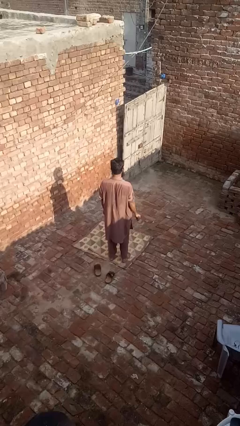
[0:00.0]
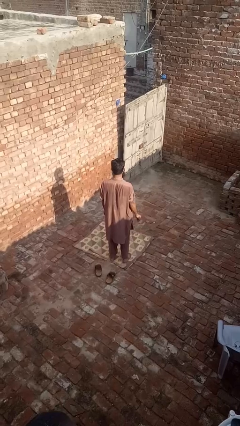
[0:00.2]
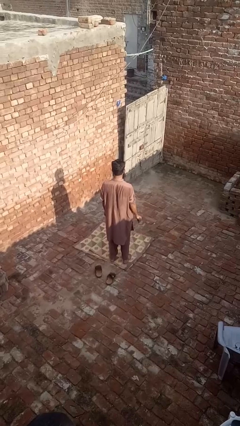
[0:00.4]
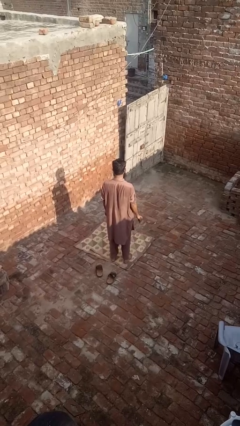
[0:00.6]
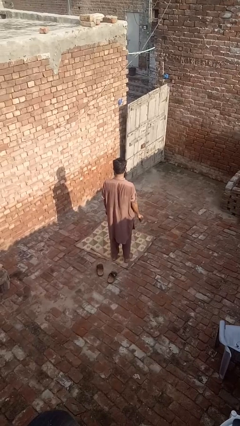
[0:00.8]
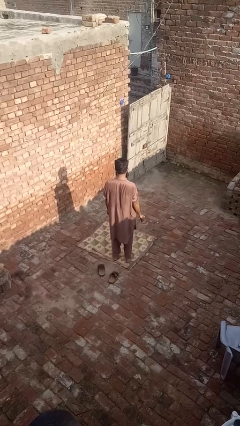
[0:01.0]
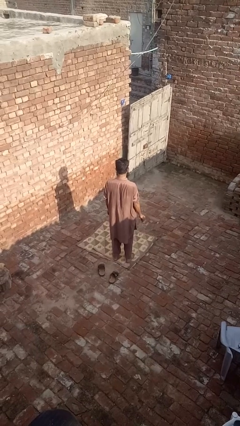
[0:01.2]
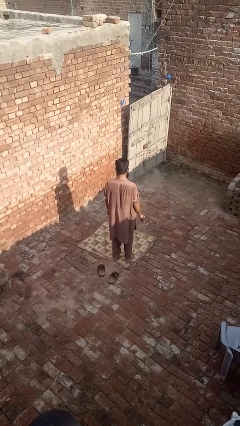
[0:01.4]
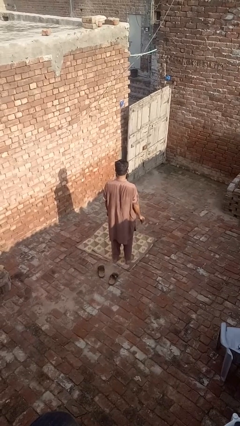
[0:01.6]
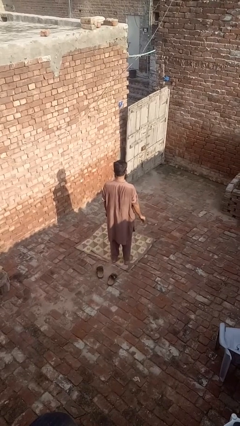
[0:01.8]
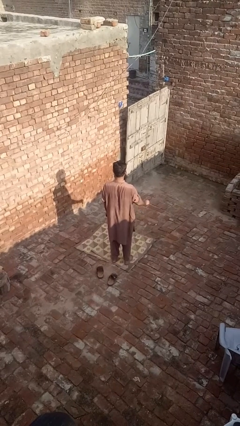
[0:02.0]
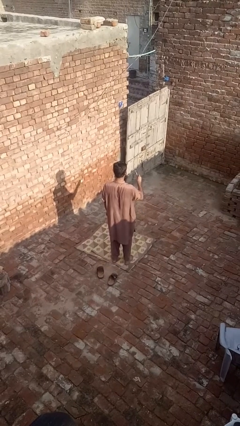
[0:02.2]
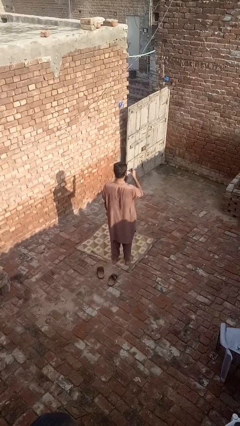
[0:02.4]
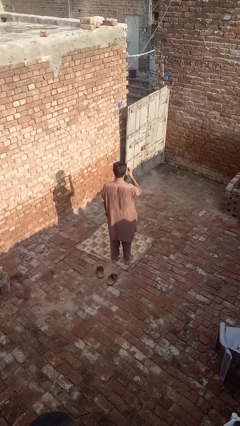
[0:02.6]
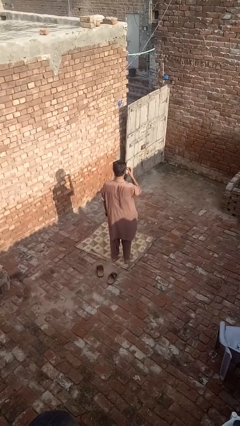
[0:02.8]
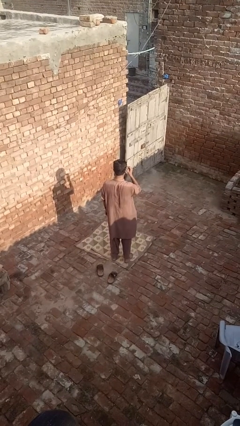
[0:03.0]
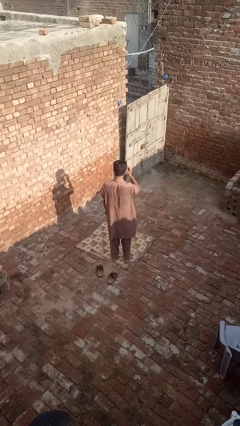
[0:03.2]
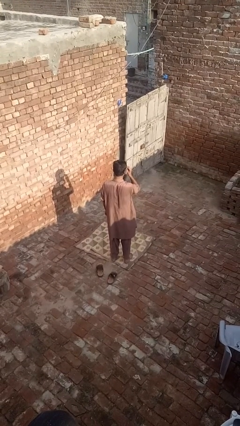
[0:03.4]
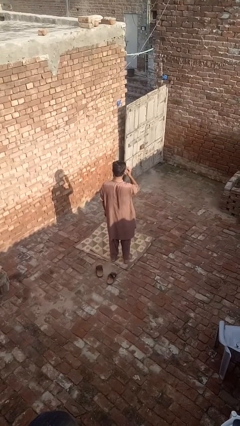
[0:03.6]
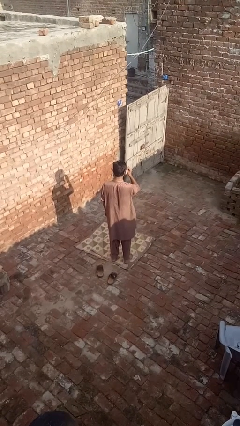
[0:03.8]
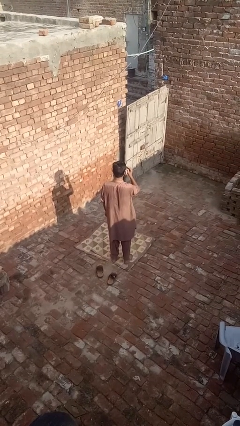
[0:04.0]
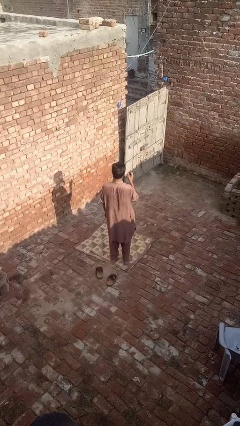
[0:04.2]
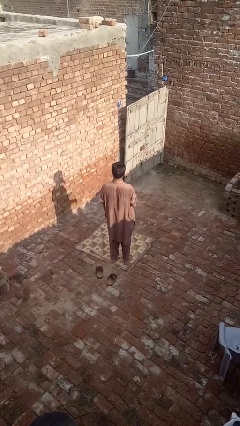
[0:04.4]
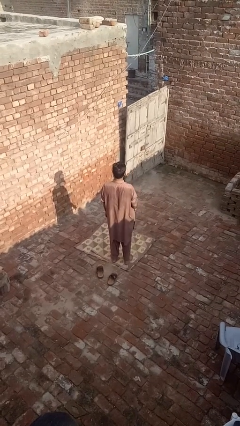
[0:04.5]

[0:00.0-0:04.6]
person puts on glasses

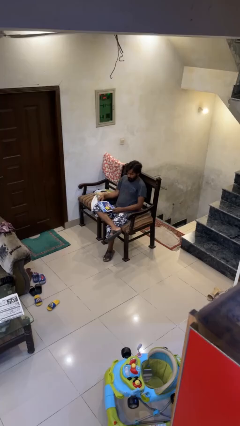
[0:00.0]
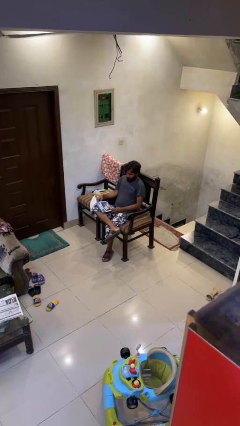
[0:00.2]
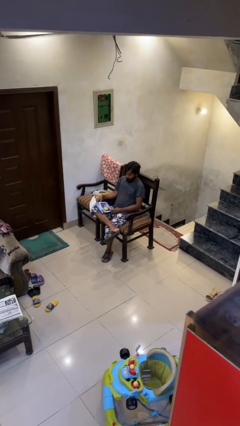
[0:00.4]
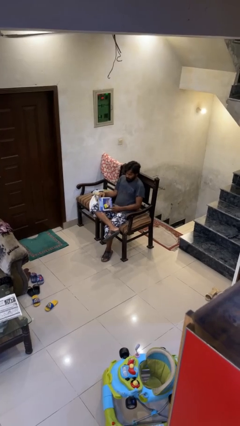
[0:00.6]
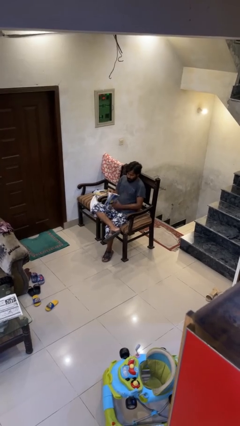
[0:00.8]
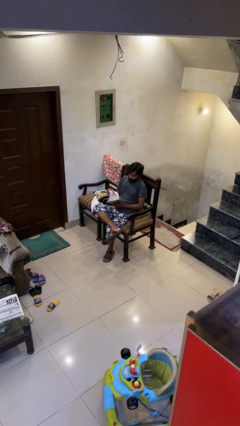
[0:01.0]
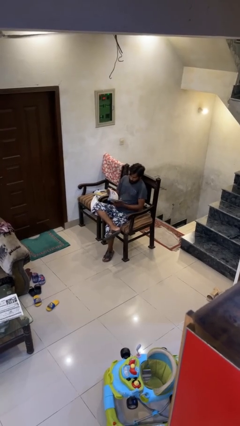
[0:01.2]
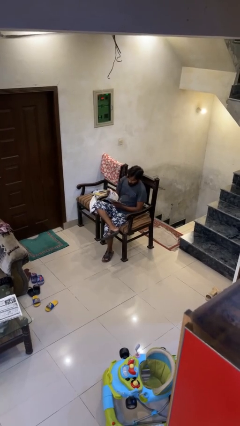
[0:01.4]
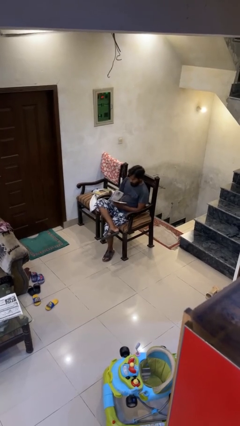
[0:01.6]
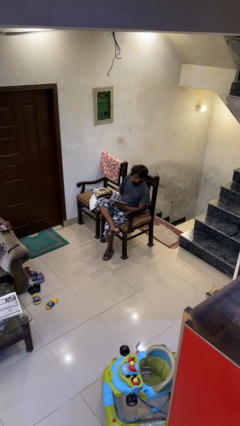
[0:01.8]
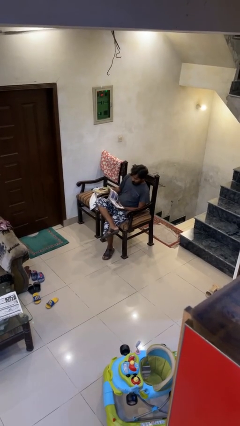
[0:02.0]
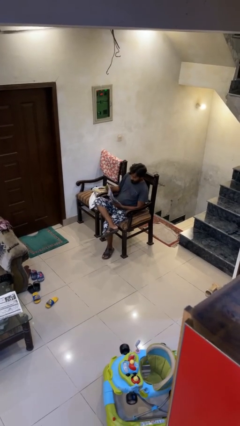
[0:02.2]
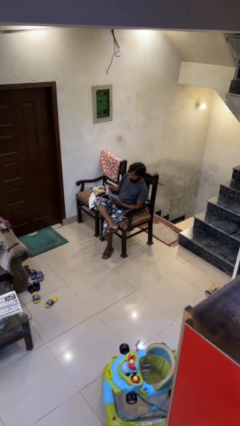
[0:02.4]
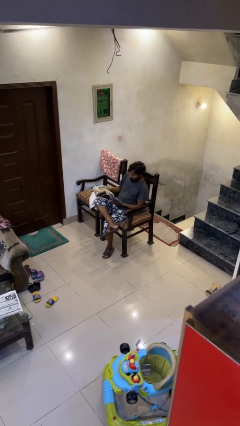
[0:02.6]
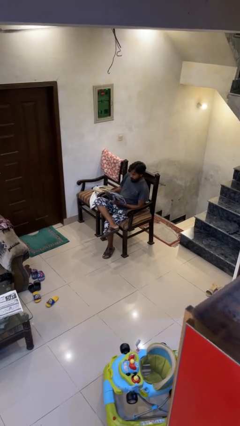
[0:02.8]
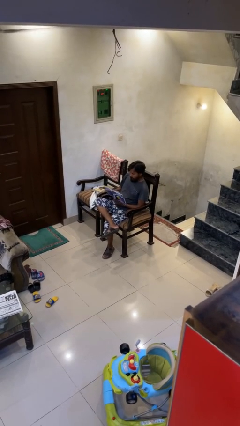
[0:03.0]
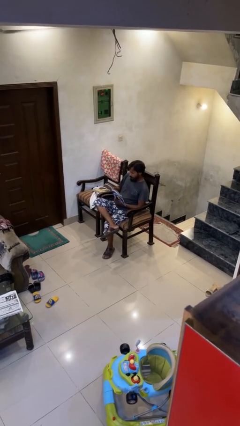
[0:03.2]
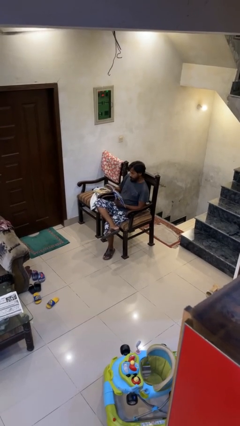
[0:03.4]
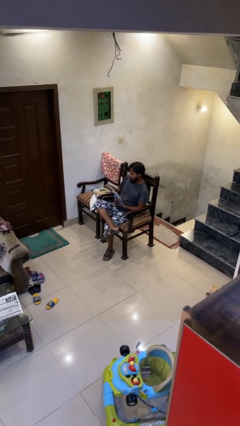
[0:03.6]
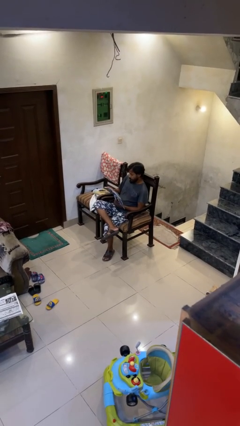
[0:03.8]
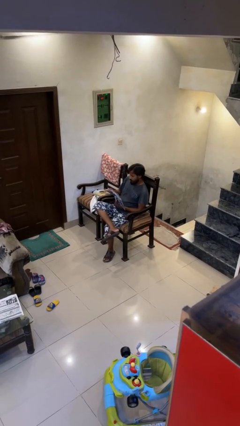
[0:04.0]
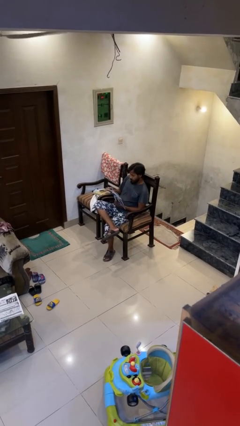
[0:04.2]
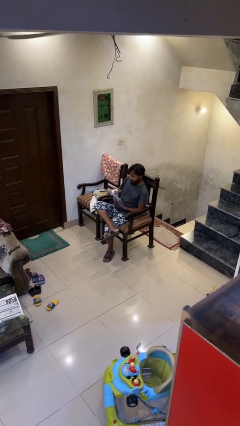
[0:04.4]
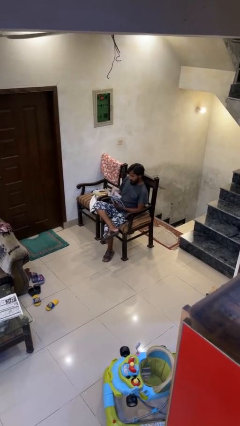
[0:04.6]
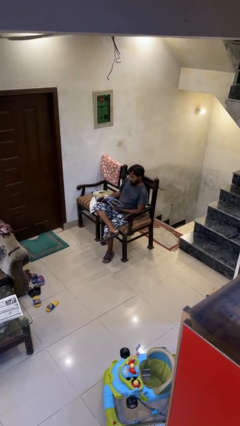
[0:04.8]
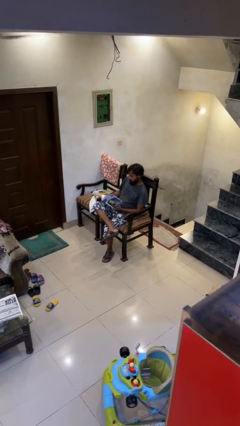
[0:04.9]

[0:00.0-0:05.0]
person reads book

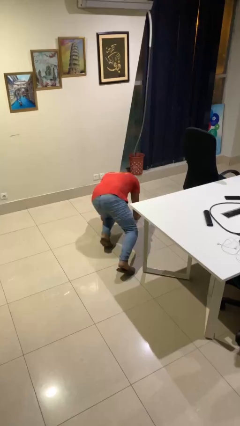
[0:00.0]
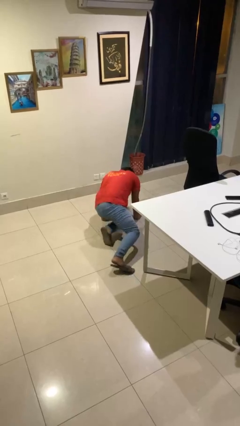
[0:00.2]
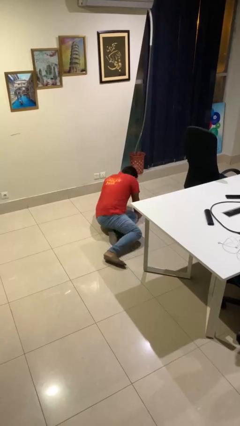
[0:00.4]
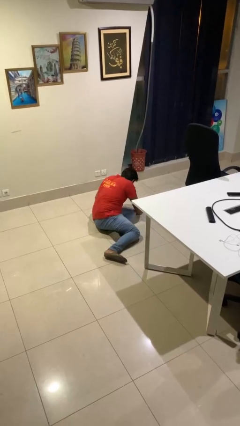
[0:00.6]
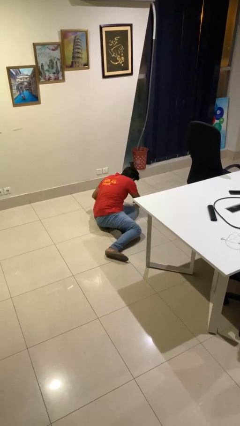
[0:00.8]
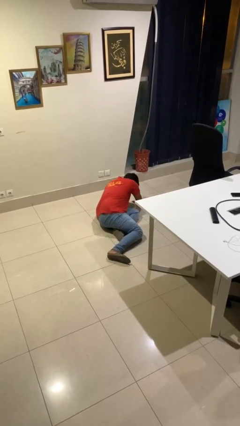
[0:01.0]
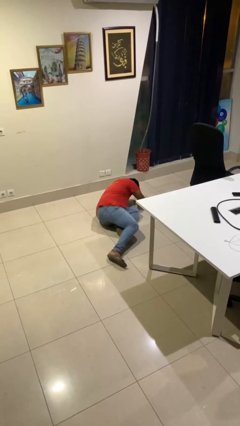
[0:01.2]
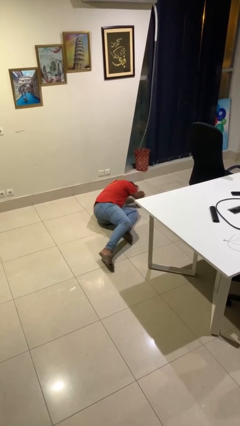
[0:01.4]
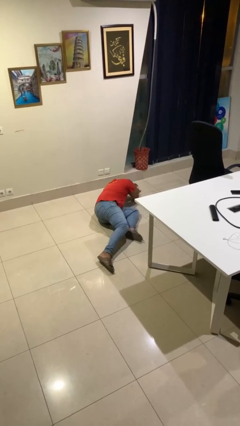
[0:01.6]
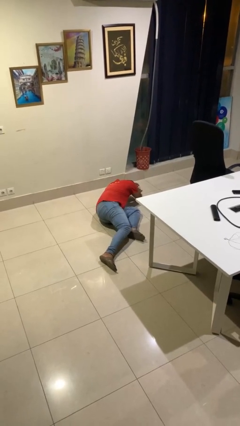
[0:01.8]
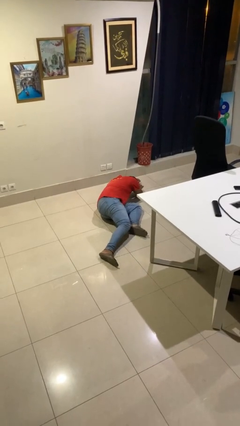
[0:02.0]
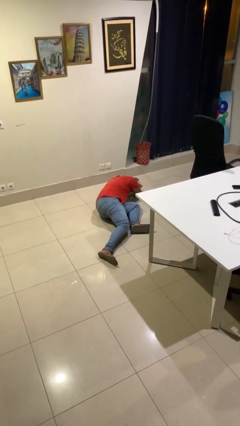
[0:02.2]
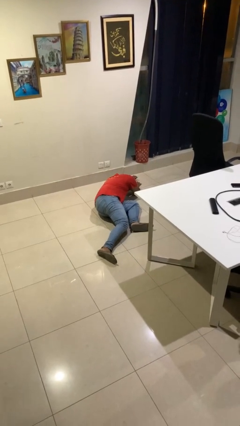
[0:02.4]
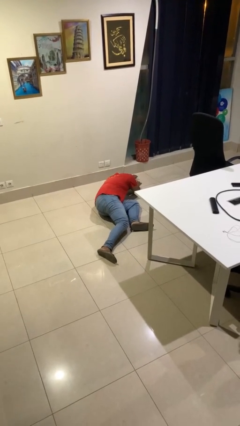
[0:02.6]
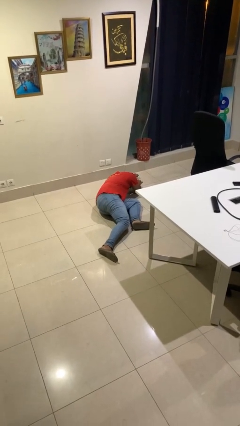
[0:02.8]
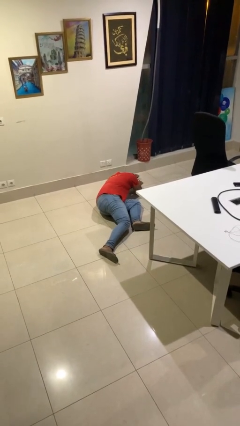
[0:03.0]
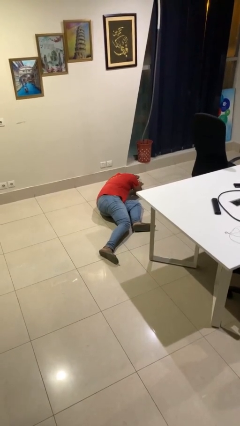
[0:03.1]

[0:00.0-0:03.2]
person lies down on floor

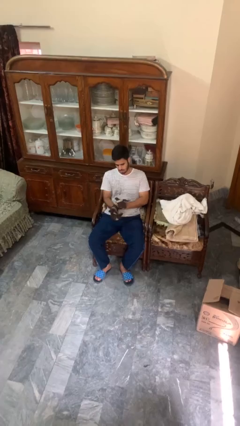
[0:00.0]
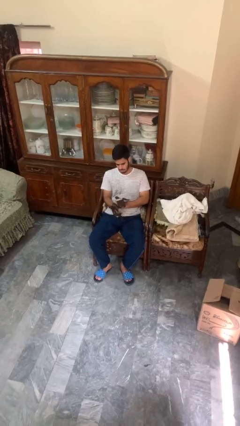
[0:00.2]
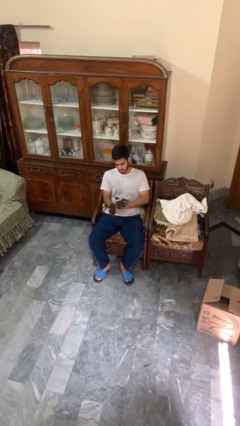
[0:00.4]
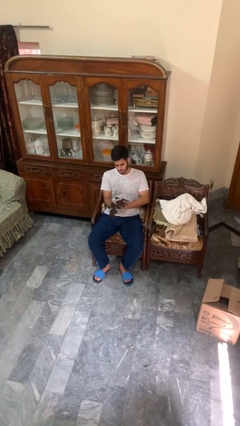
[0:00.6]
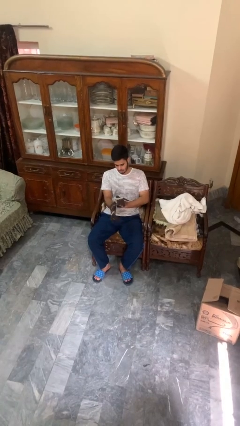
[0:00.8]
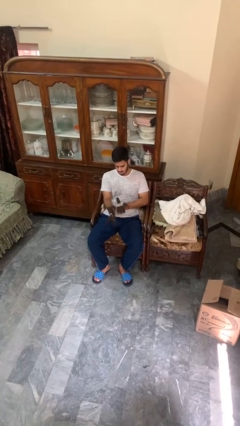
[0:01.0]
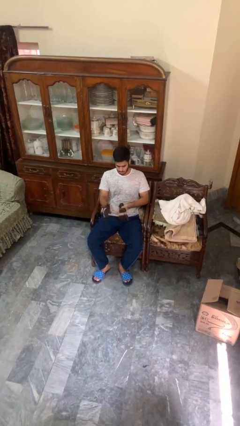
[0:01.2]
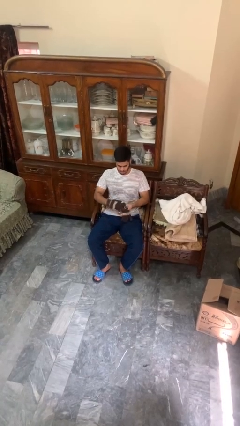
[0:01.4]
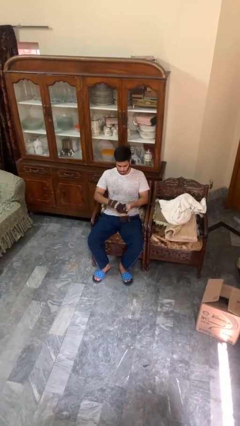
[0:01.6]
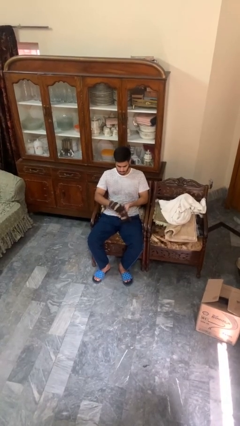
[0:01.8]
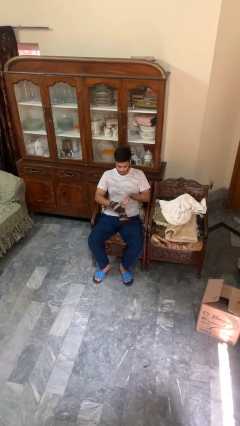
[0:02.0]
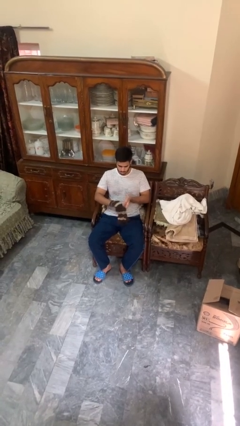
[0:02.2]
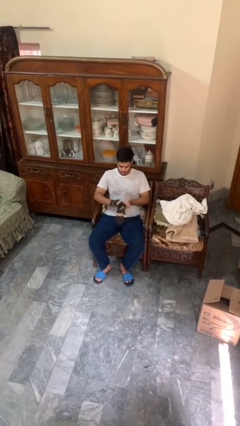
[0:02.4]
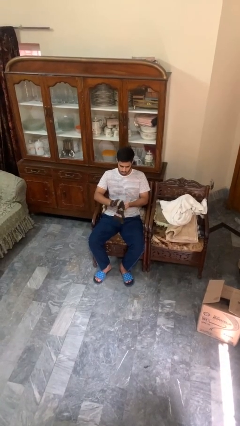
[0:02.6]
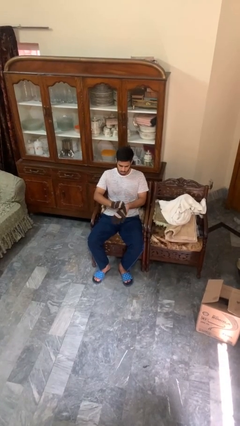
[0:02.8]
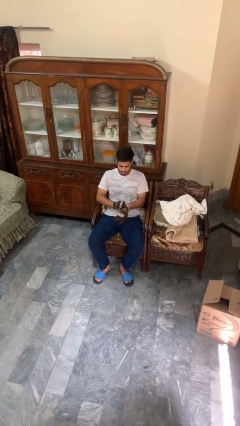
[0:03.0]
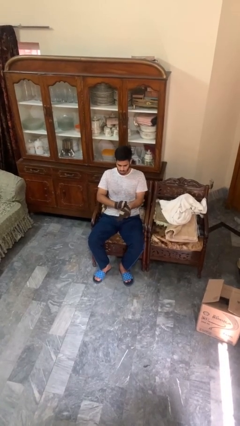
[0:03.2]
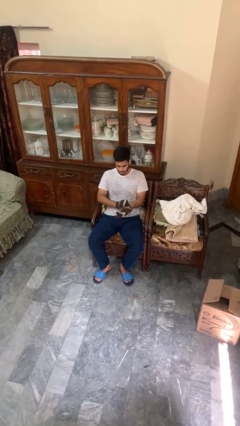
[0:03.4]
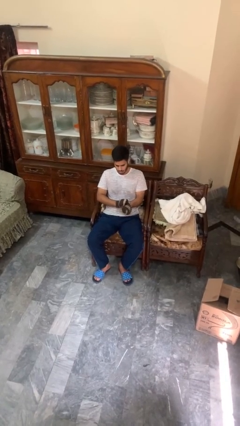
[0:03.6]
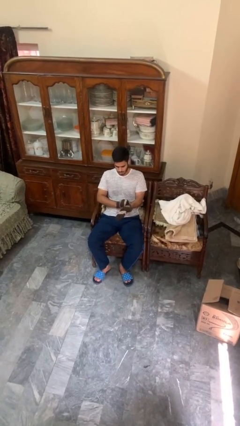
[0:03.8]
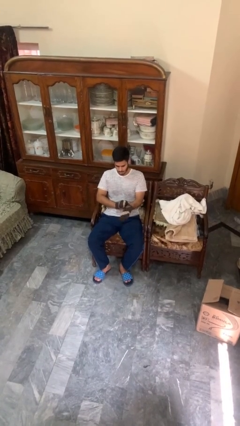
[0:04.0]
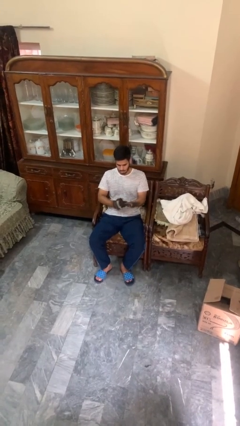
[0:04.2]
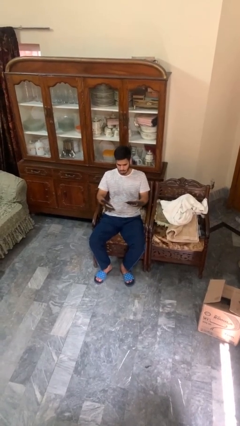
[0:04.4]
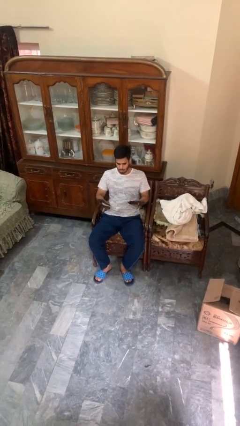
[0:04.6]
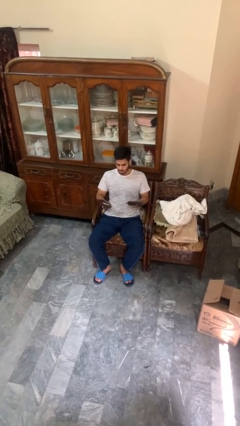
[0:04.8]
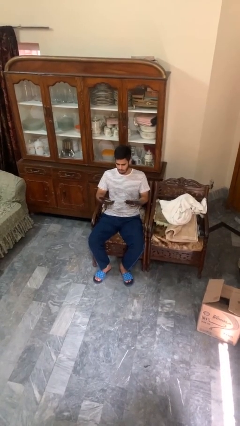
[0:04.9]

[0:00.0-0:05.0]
person puts on gloves
